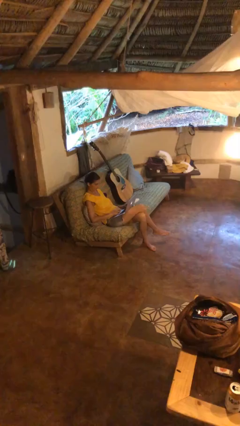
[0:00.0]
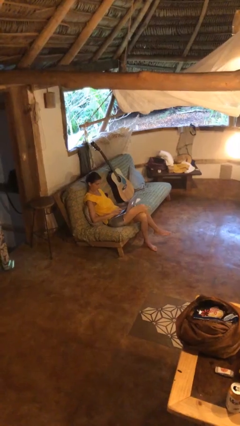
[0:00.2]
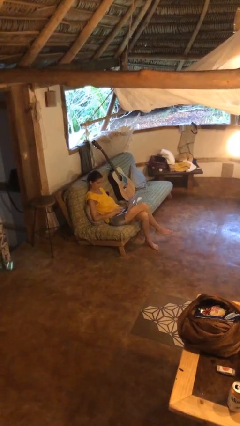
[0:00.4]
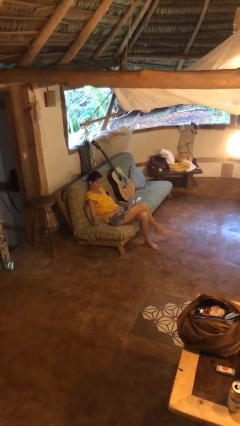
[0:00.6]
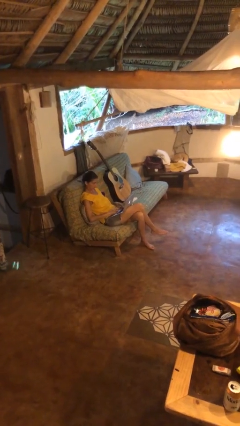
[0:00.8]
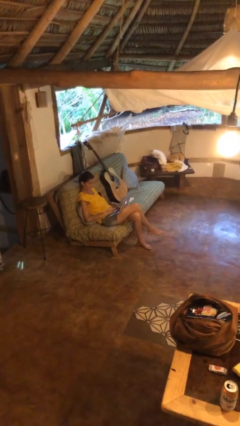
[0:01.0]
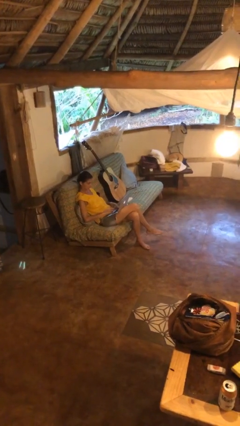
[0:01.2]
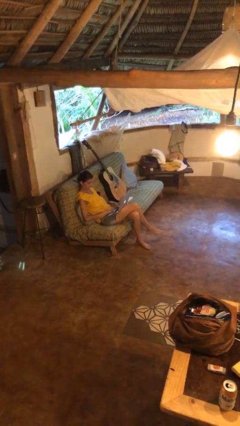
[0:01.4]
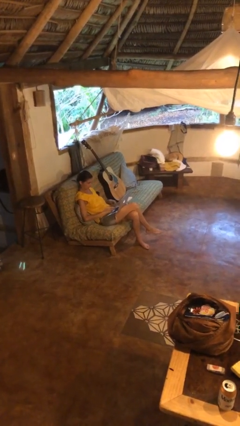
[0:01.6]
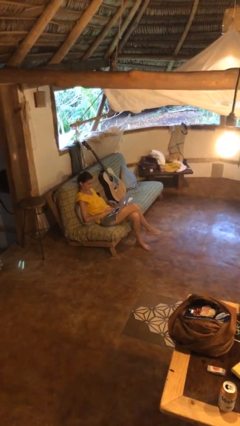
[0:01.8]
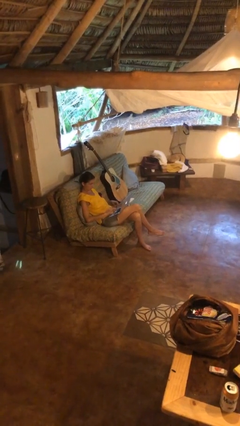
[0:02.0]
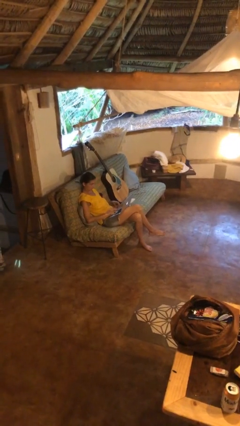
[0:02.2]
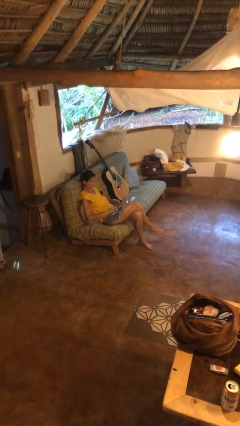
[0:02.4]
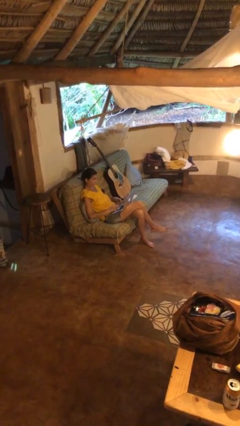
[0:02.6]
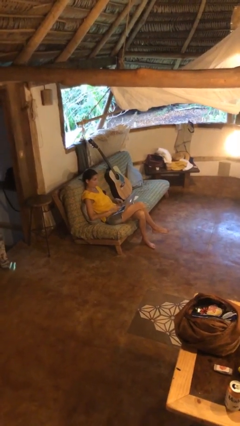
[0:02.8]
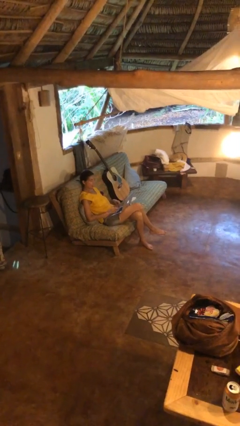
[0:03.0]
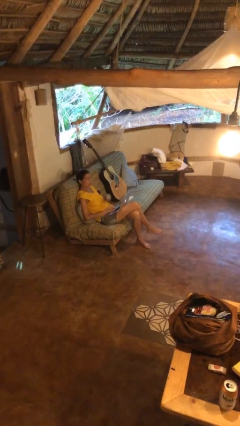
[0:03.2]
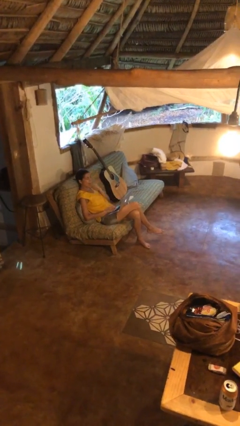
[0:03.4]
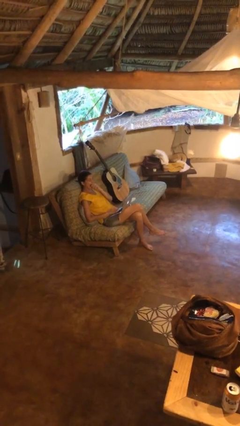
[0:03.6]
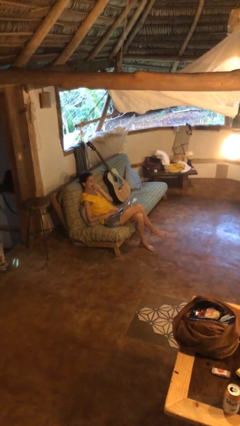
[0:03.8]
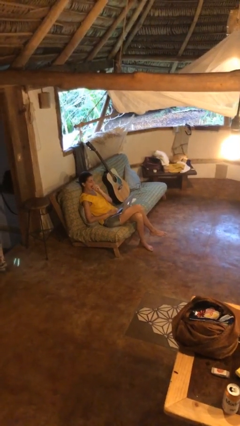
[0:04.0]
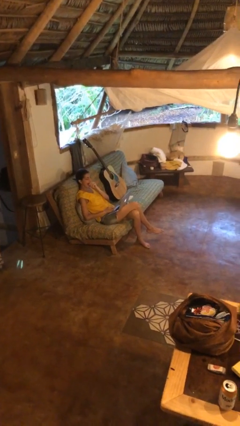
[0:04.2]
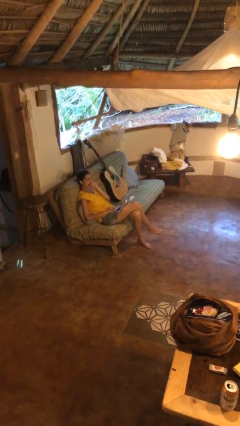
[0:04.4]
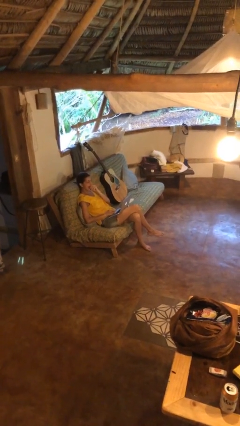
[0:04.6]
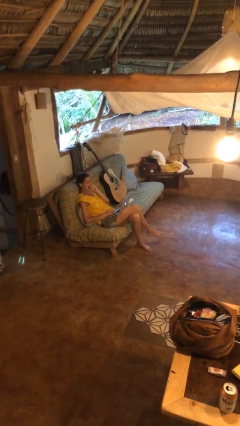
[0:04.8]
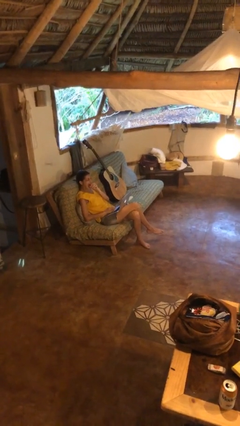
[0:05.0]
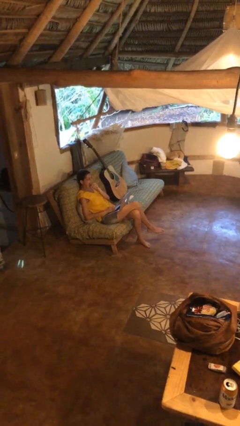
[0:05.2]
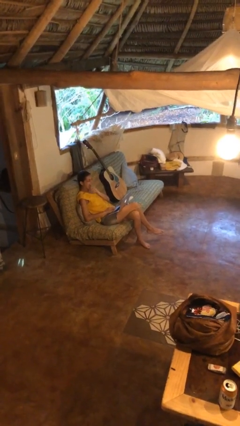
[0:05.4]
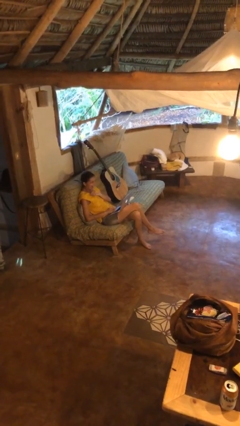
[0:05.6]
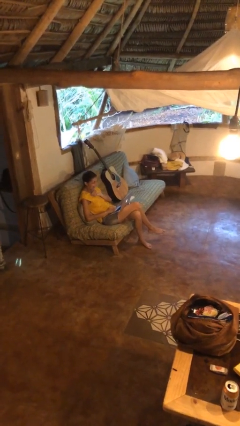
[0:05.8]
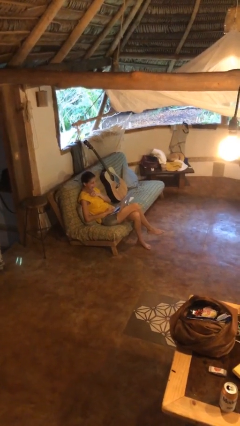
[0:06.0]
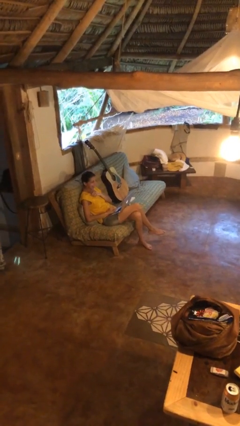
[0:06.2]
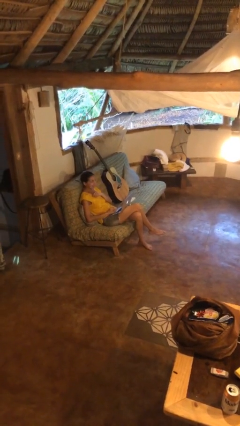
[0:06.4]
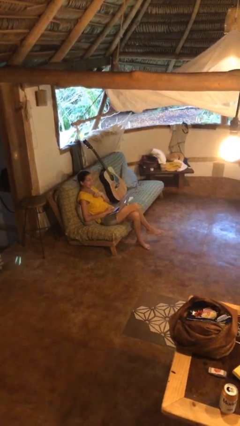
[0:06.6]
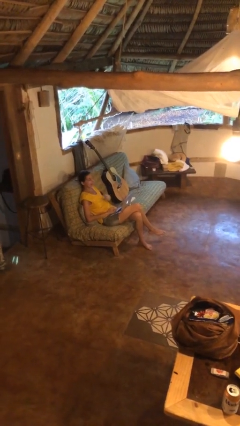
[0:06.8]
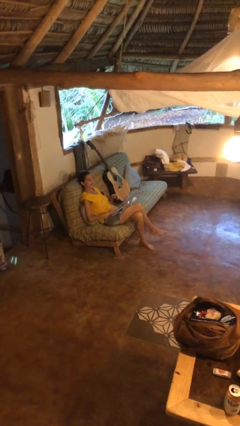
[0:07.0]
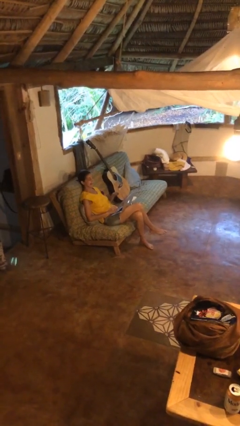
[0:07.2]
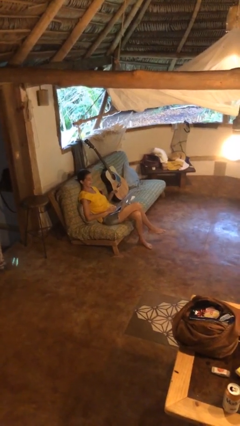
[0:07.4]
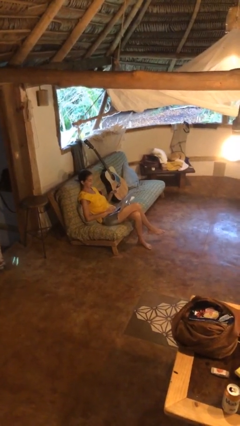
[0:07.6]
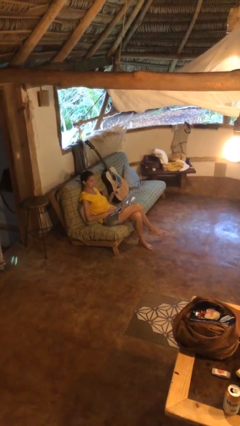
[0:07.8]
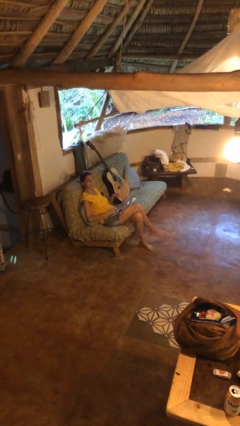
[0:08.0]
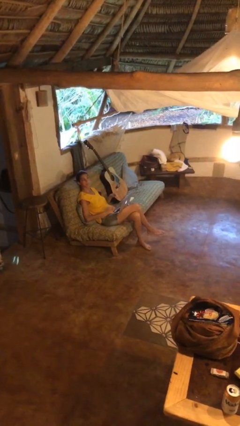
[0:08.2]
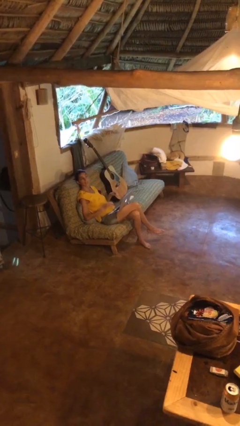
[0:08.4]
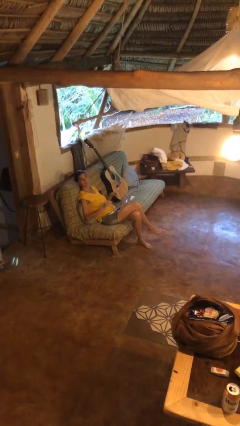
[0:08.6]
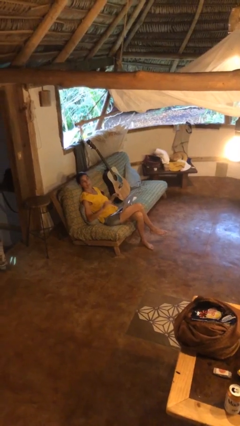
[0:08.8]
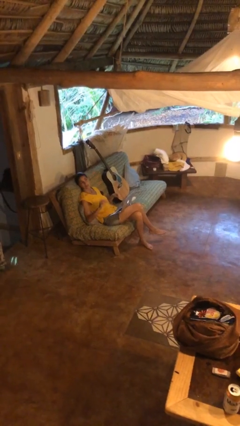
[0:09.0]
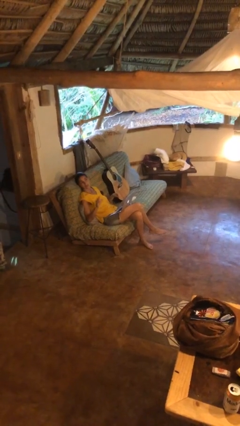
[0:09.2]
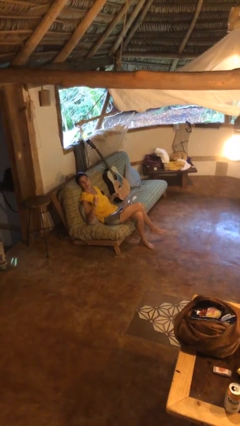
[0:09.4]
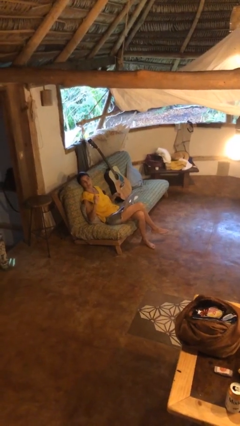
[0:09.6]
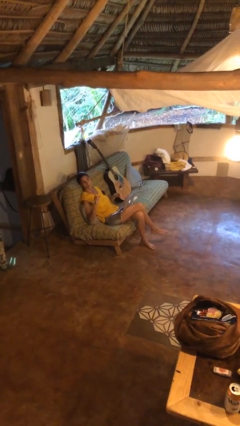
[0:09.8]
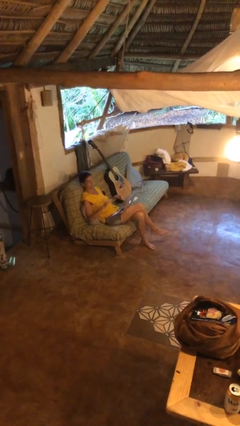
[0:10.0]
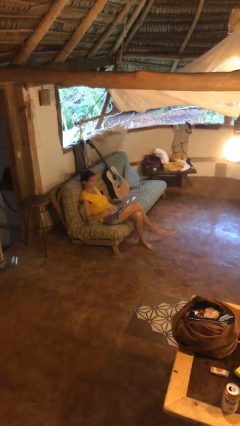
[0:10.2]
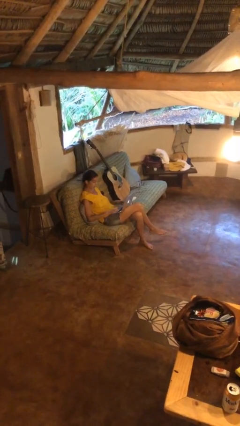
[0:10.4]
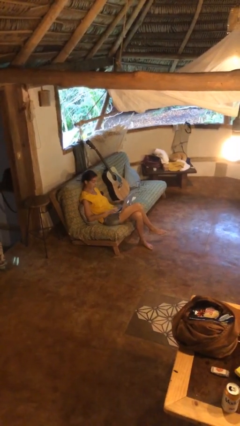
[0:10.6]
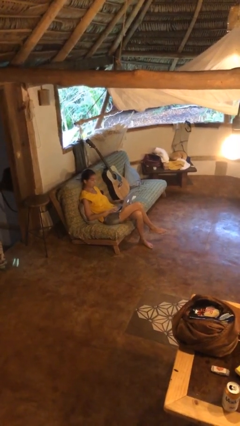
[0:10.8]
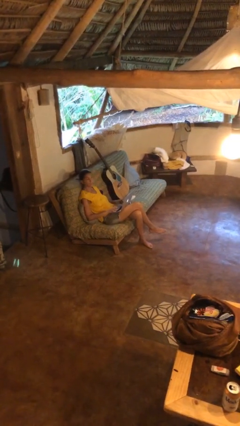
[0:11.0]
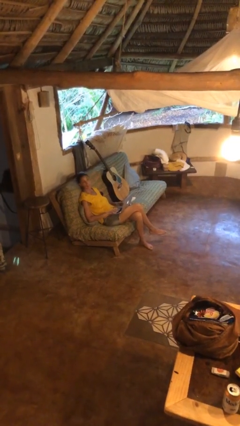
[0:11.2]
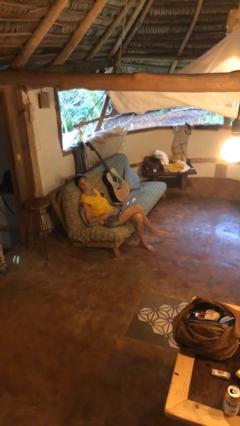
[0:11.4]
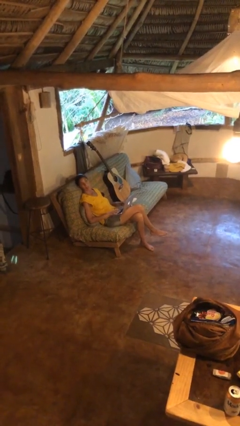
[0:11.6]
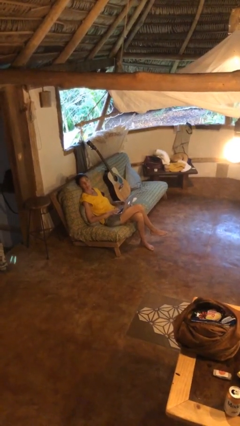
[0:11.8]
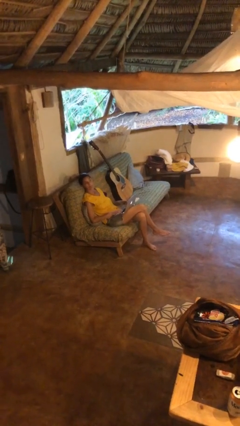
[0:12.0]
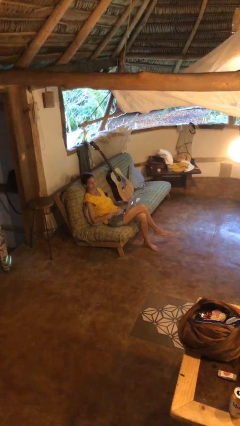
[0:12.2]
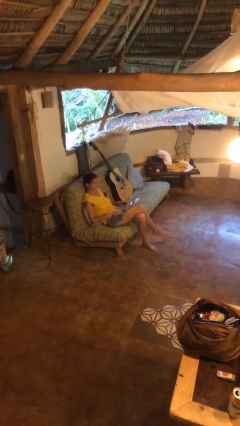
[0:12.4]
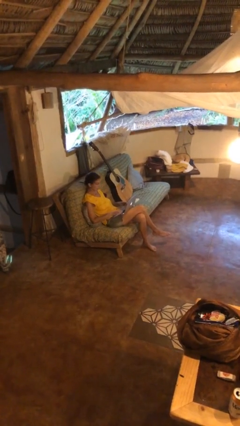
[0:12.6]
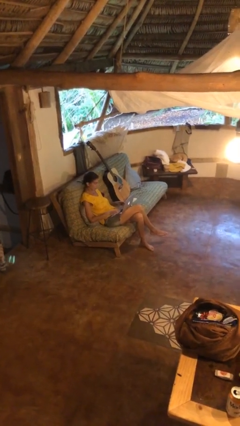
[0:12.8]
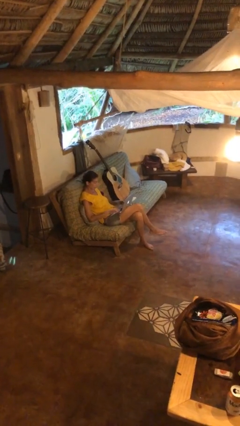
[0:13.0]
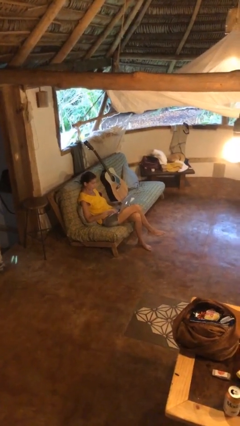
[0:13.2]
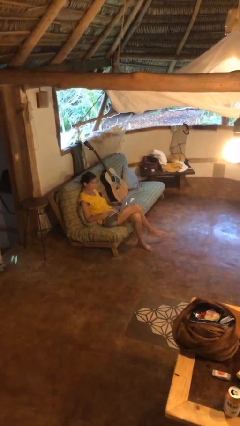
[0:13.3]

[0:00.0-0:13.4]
person interacts with laptop

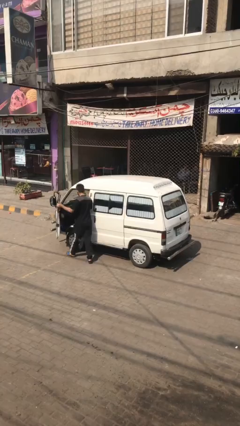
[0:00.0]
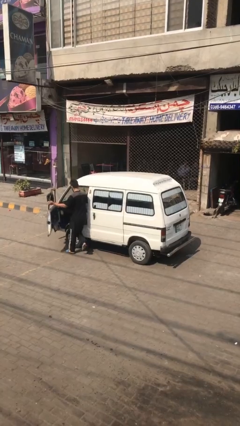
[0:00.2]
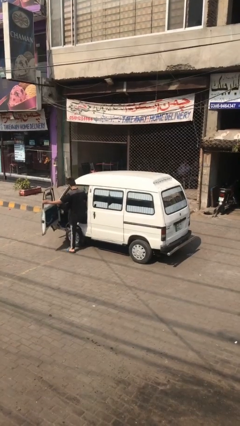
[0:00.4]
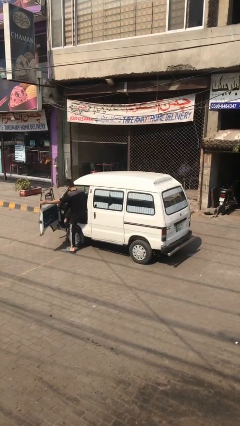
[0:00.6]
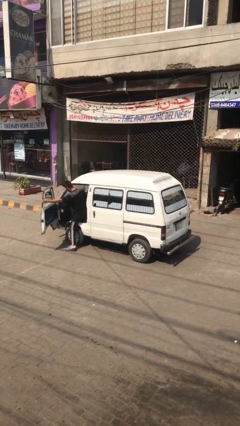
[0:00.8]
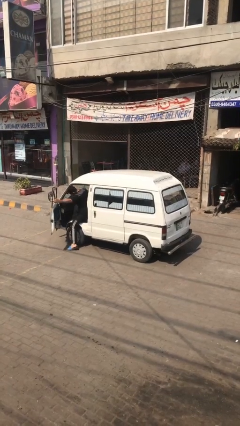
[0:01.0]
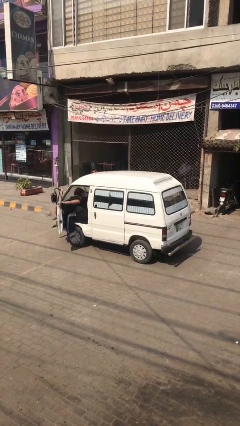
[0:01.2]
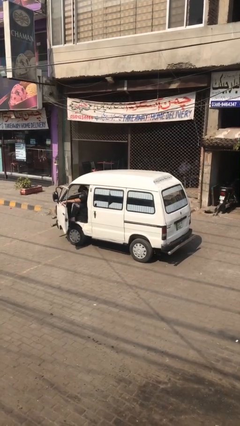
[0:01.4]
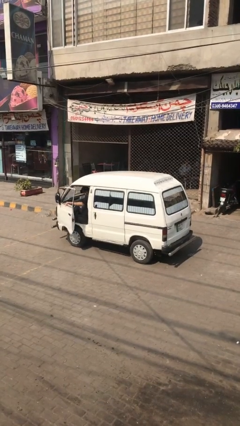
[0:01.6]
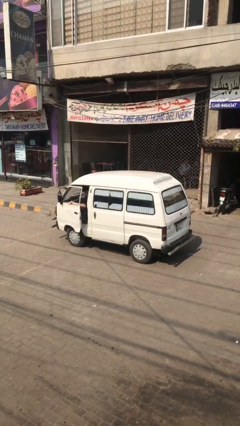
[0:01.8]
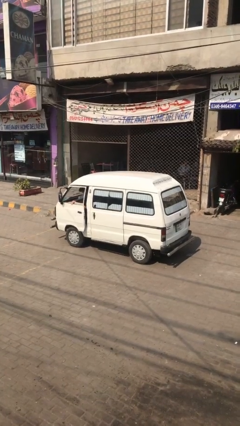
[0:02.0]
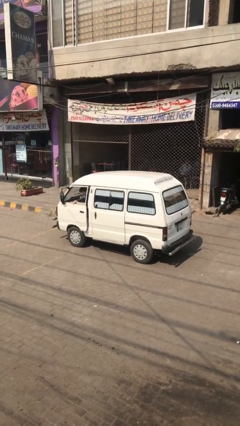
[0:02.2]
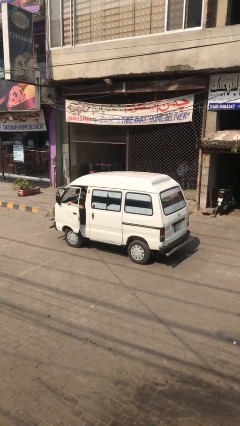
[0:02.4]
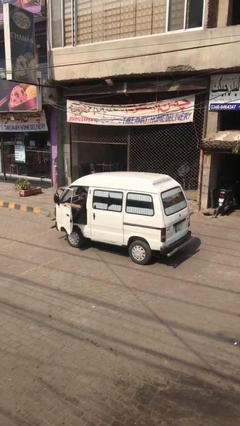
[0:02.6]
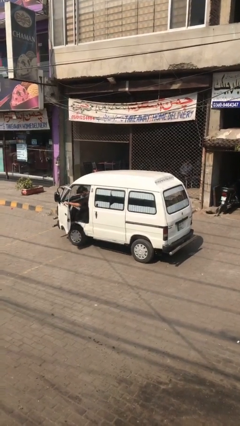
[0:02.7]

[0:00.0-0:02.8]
car picks up person

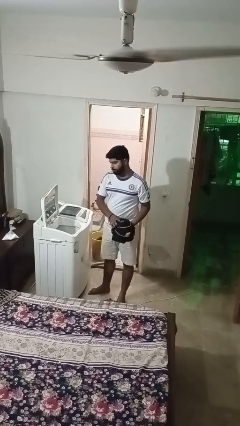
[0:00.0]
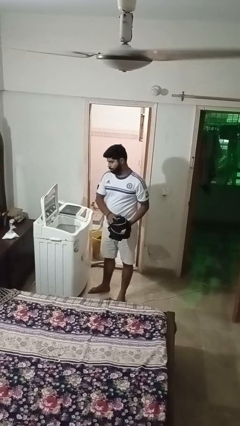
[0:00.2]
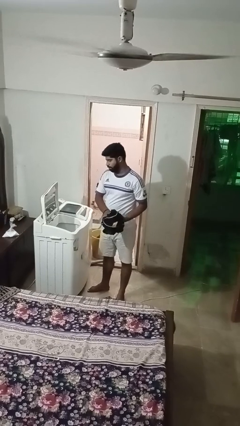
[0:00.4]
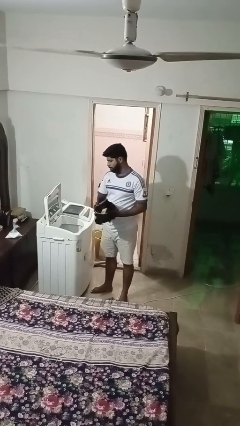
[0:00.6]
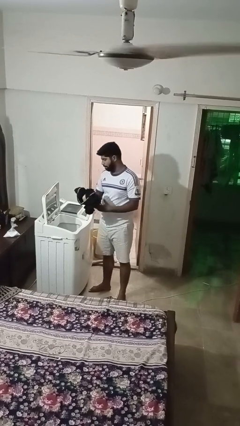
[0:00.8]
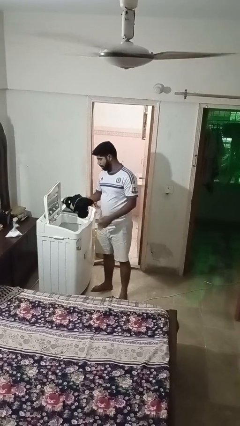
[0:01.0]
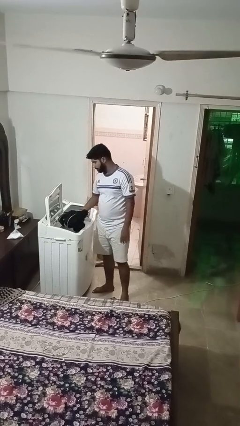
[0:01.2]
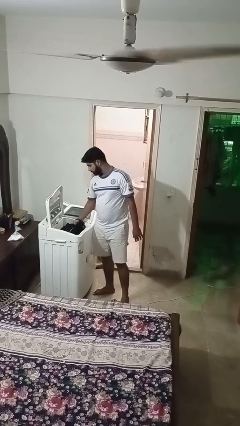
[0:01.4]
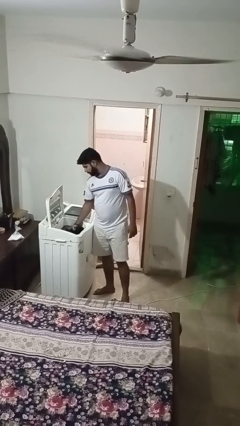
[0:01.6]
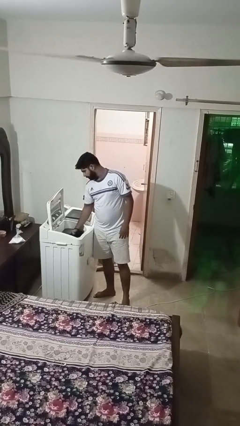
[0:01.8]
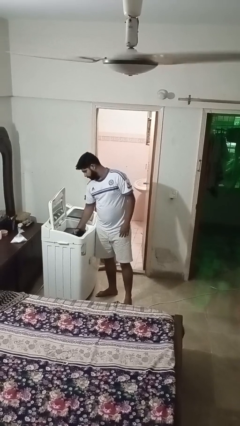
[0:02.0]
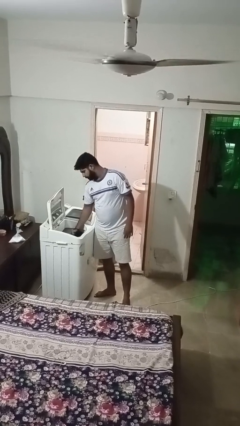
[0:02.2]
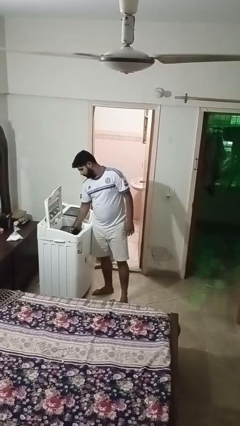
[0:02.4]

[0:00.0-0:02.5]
person loads clotheswasher
